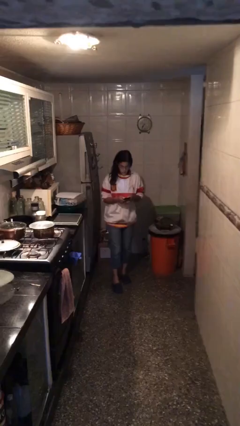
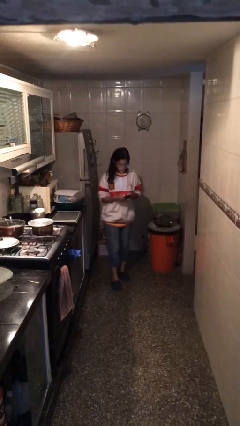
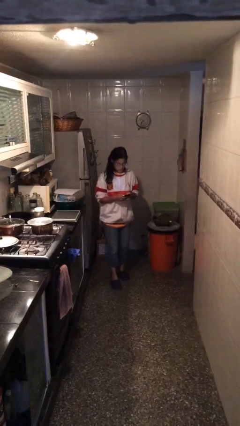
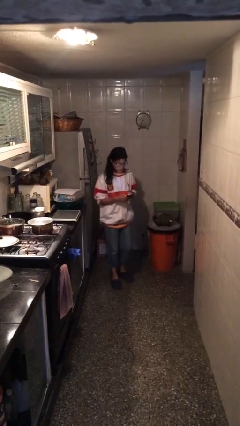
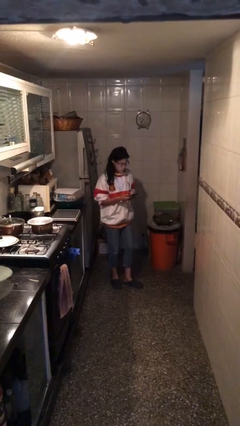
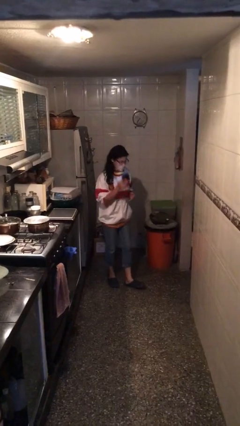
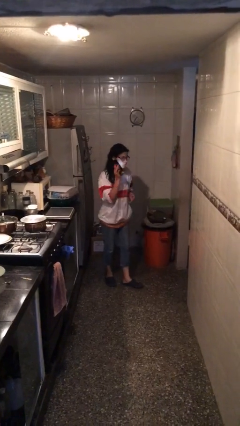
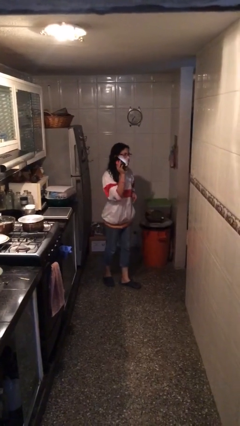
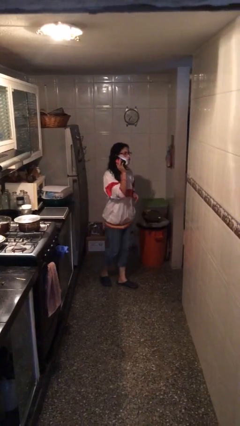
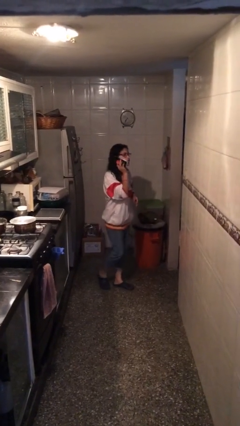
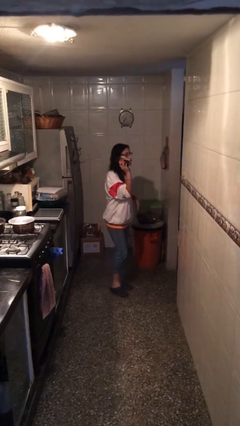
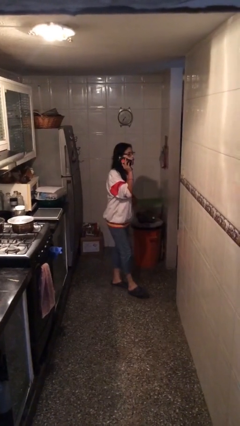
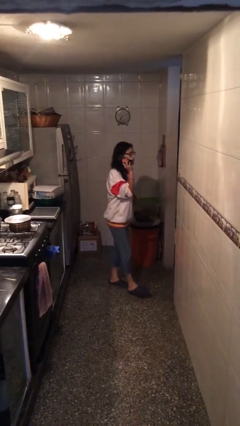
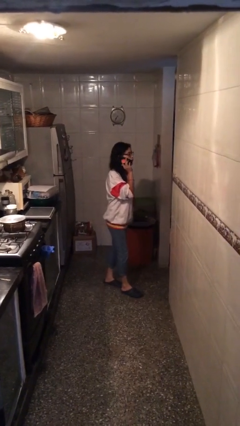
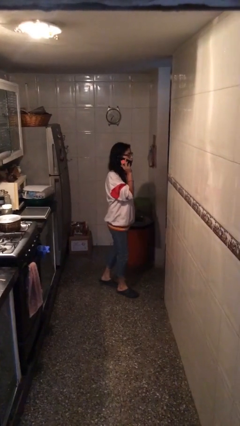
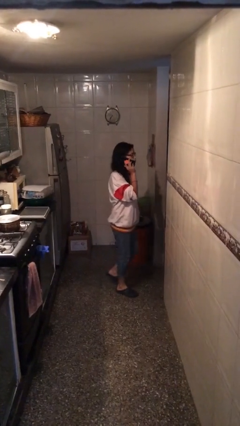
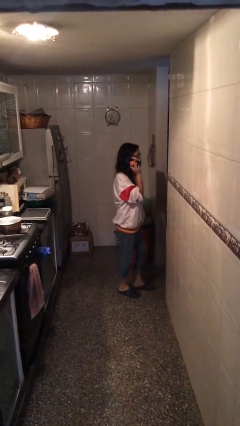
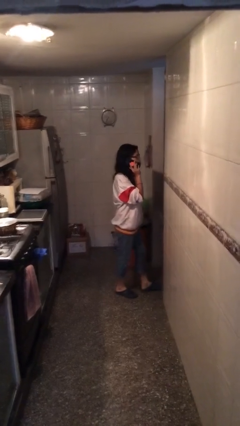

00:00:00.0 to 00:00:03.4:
person talks on phone

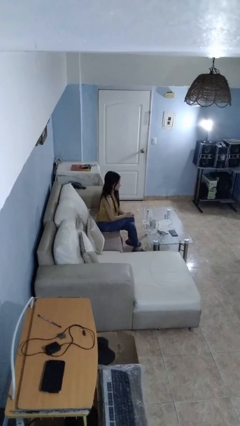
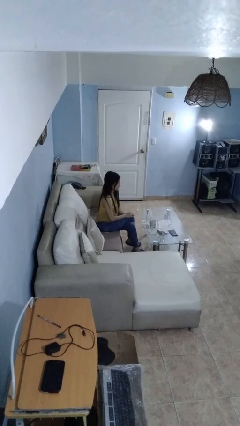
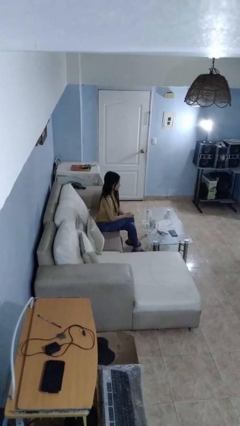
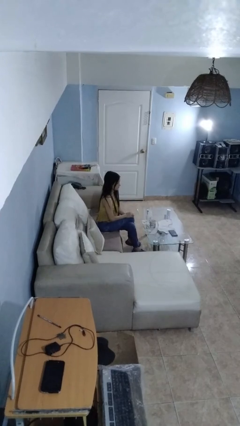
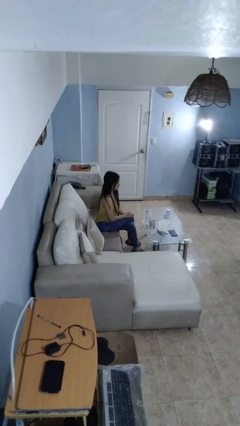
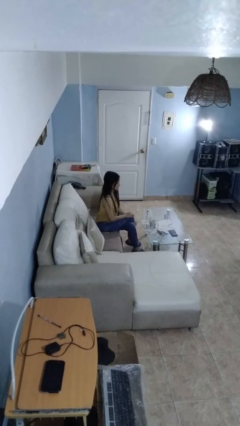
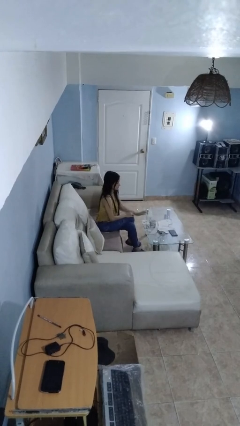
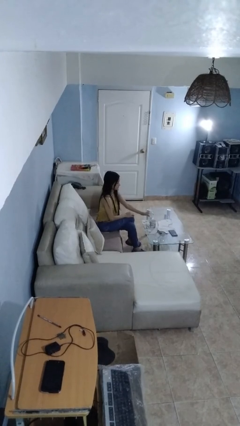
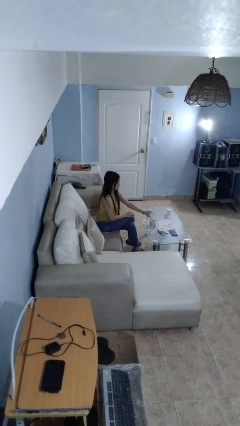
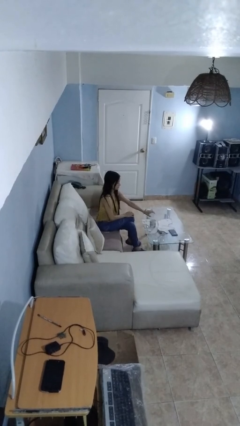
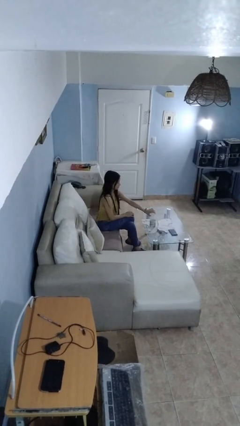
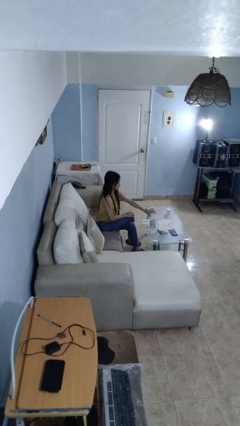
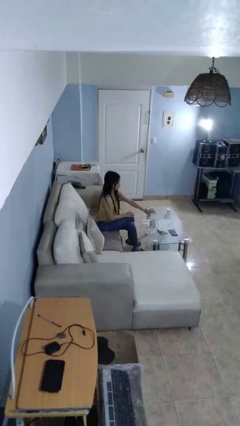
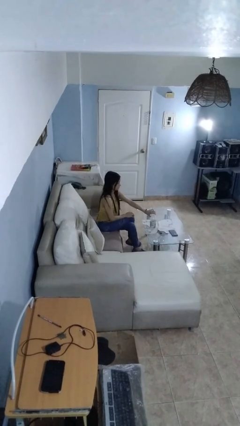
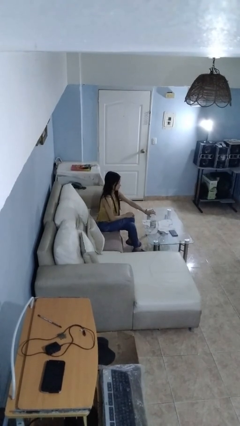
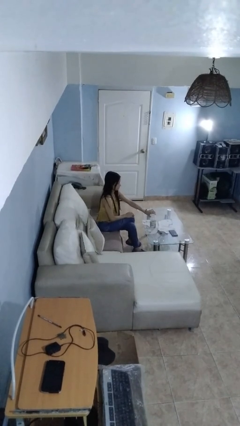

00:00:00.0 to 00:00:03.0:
person pours liquid into cup

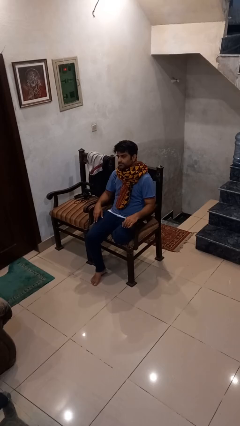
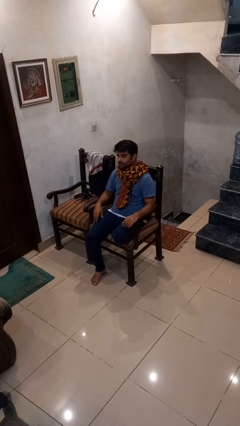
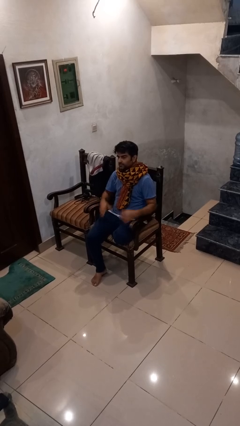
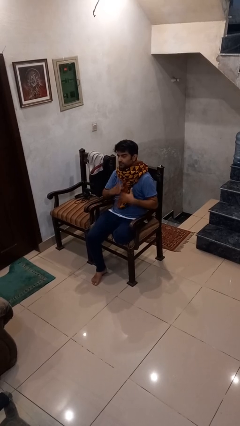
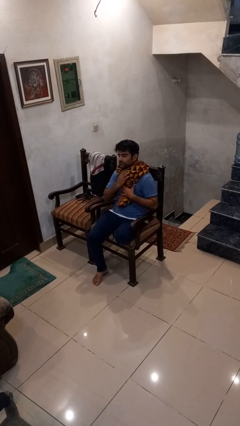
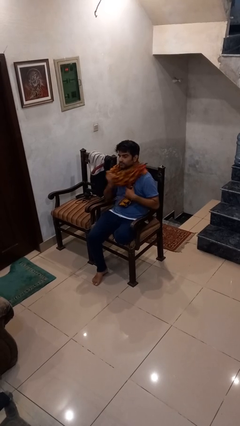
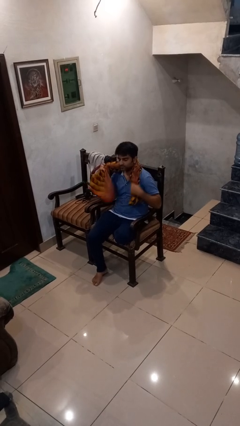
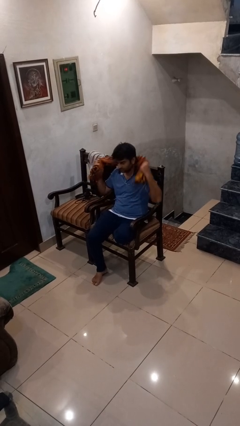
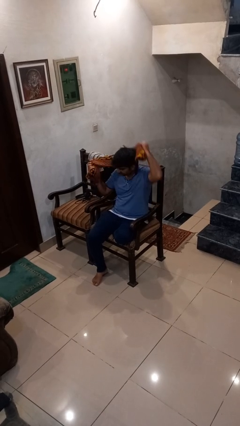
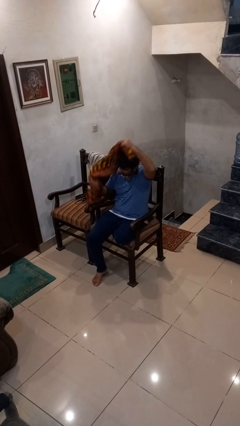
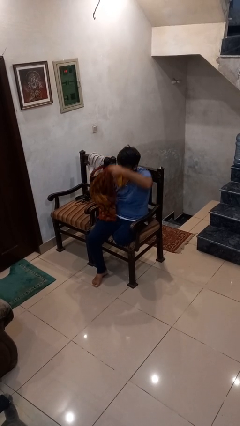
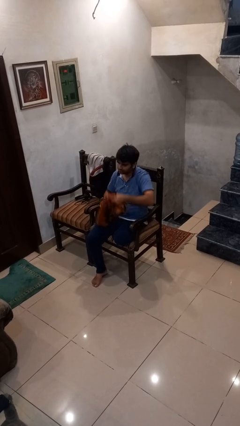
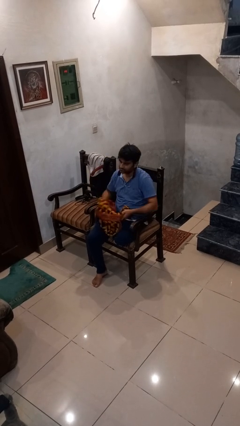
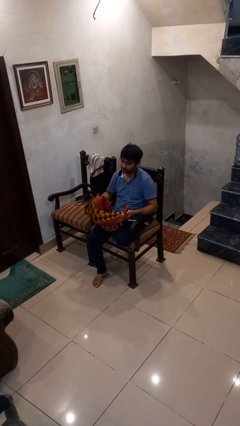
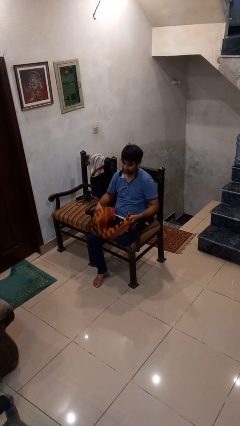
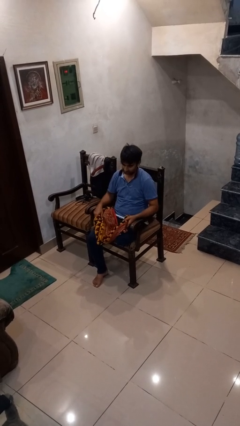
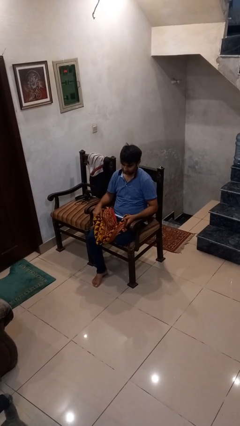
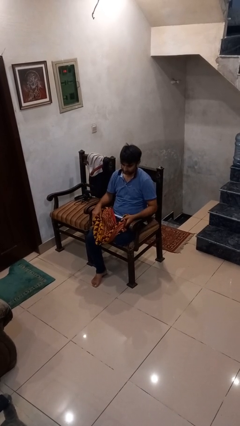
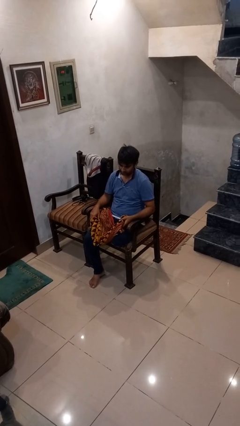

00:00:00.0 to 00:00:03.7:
person takes off scarf

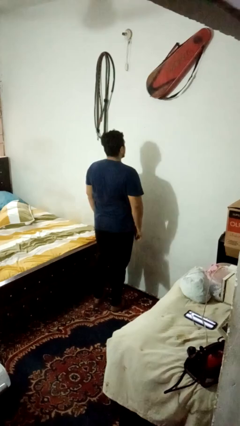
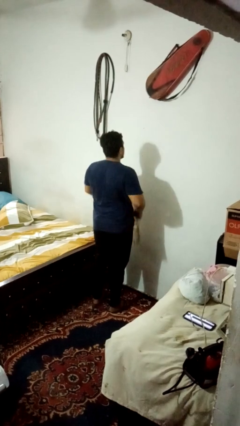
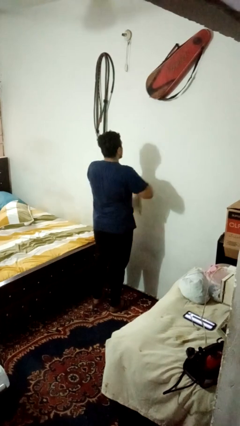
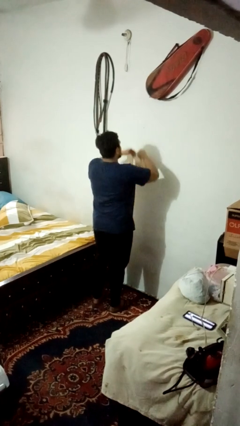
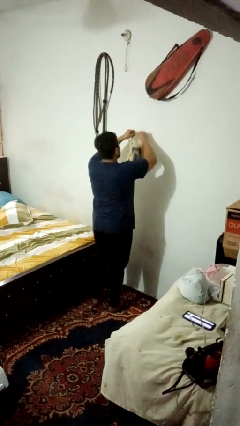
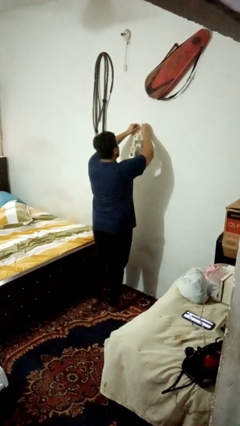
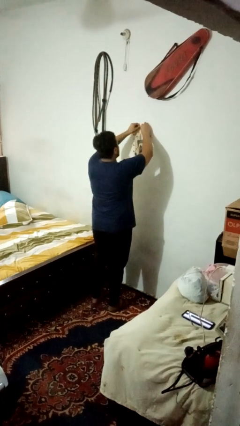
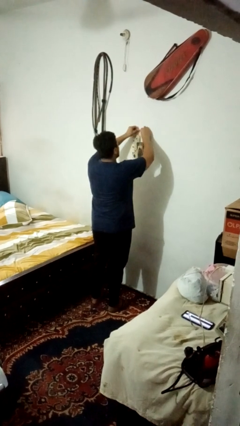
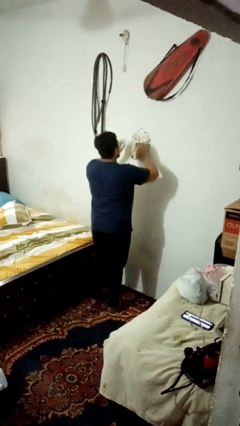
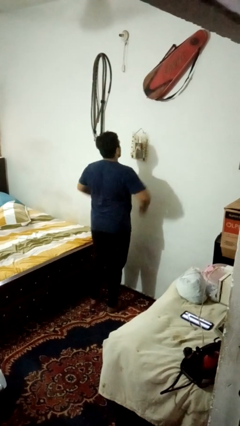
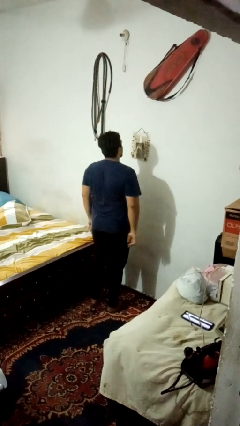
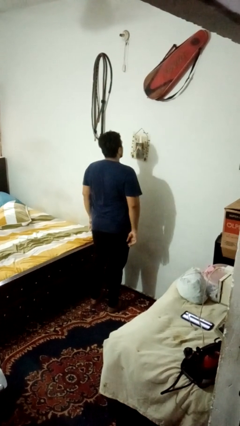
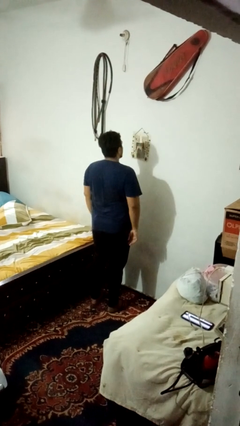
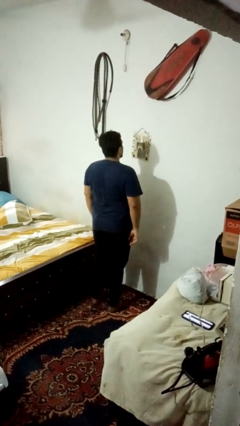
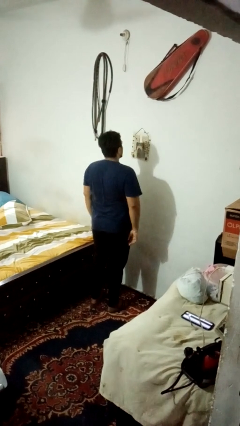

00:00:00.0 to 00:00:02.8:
person puts up picture frame

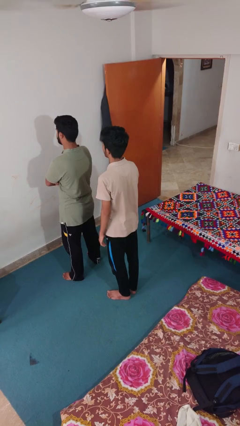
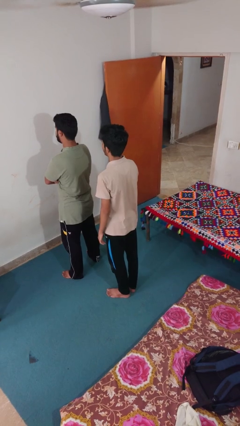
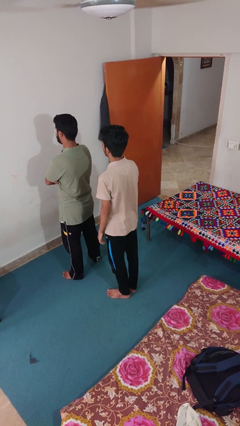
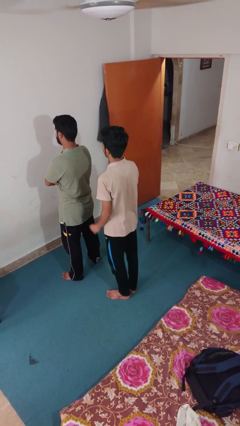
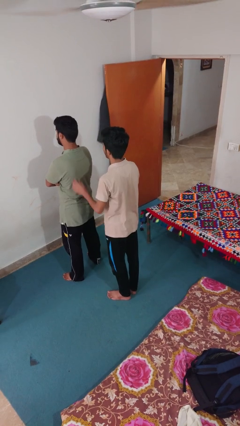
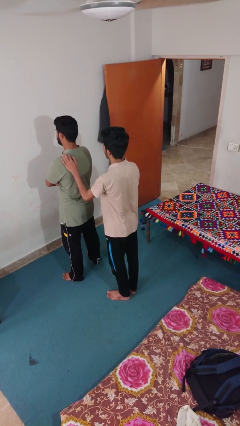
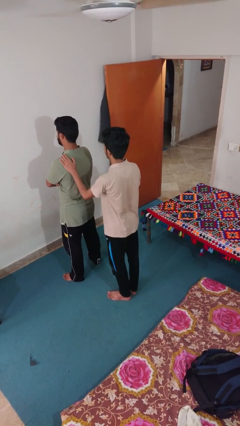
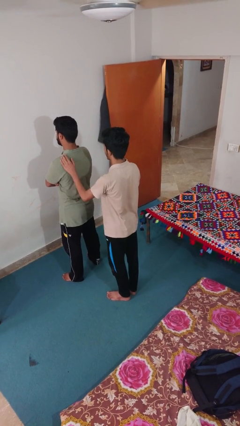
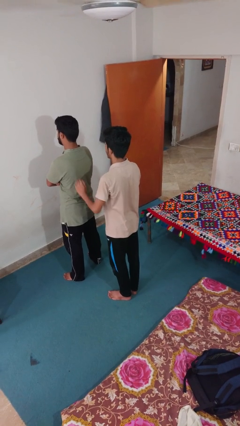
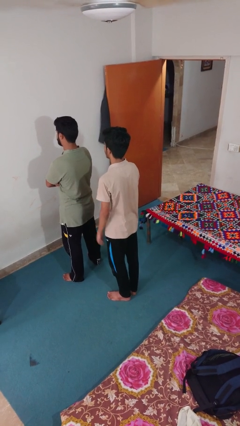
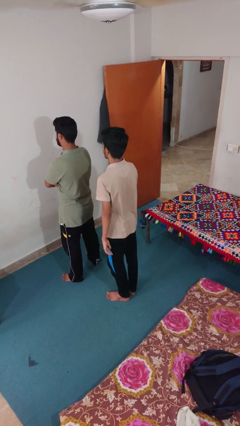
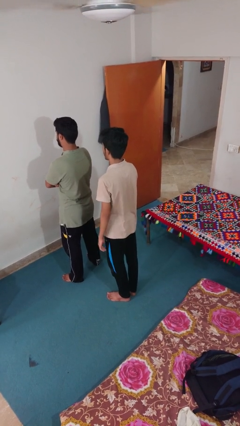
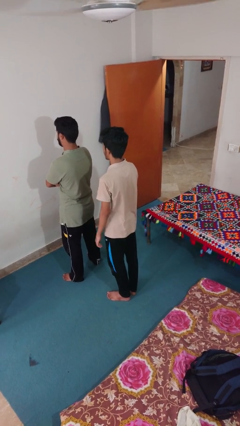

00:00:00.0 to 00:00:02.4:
person touches back of person

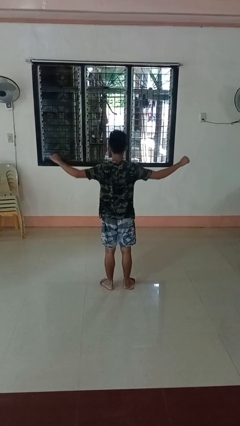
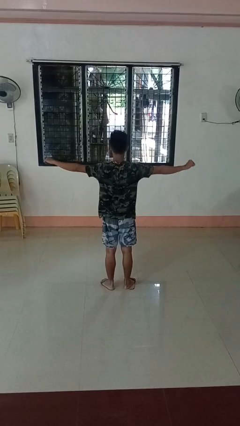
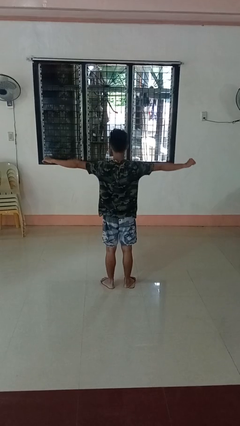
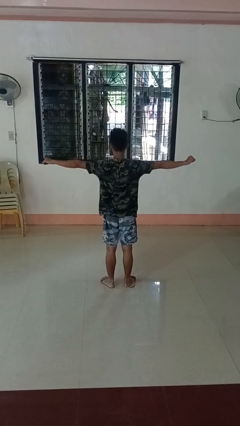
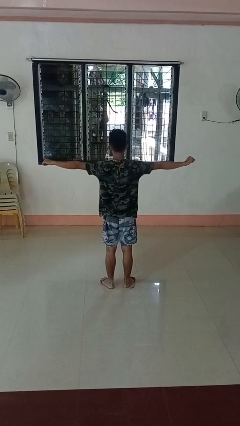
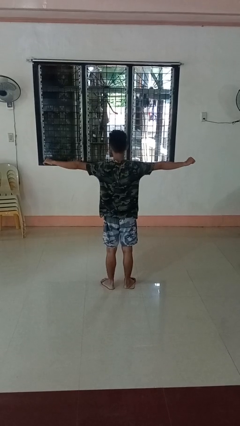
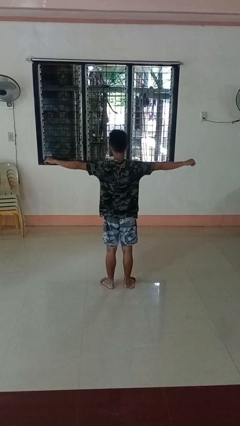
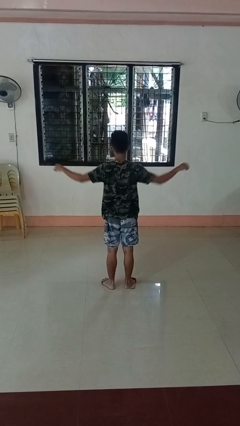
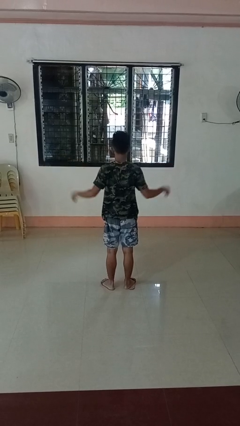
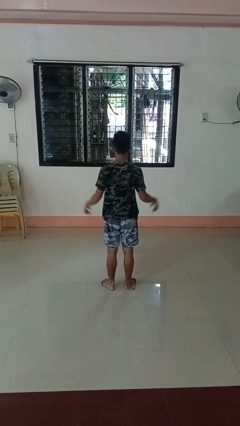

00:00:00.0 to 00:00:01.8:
person stretches arms to side

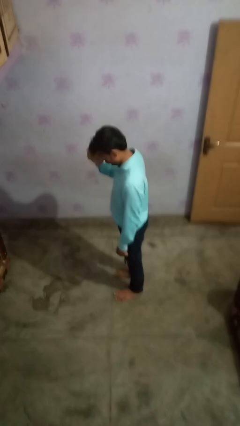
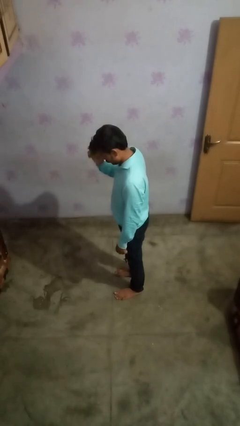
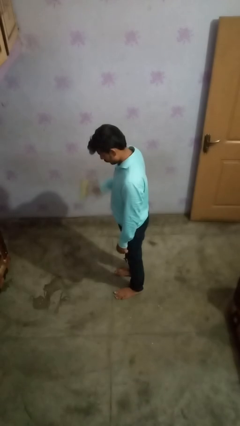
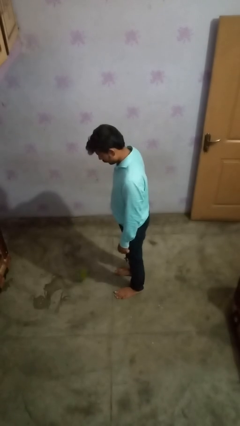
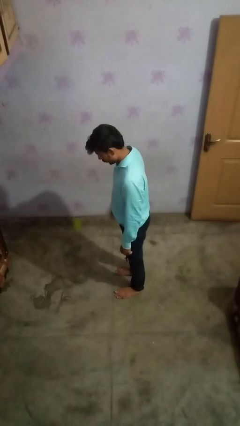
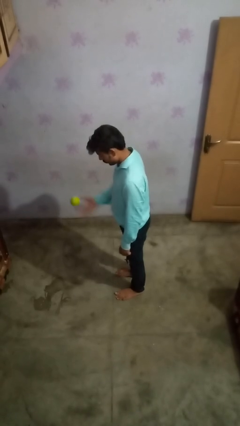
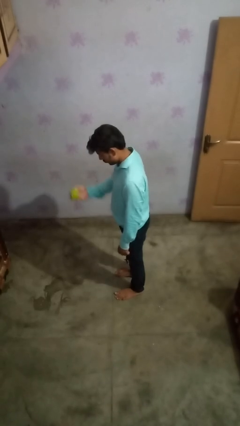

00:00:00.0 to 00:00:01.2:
person bounces ball on floor
